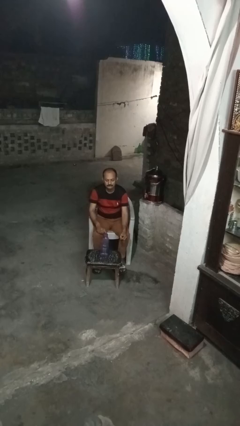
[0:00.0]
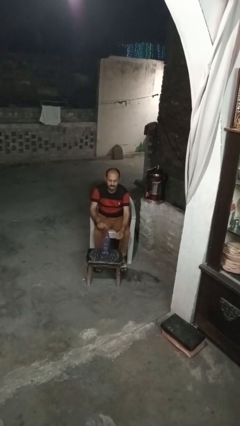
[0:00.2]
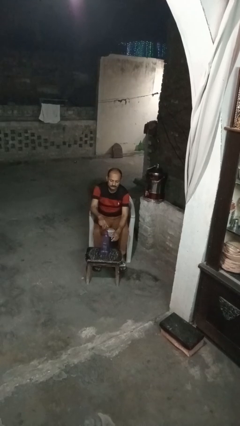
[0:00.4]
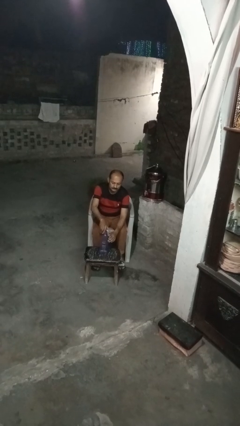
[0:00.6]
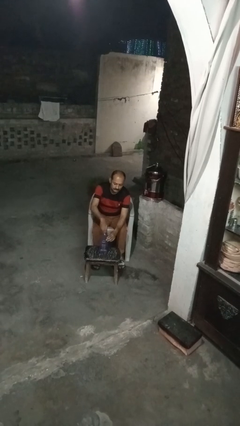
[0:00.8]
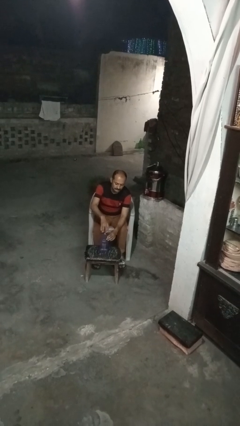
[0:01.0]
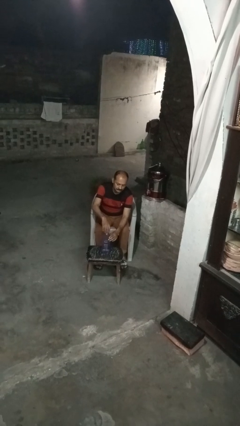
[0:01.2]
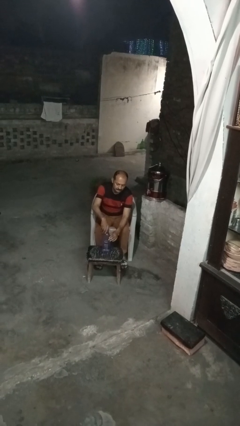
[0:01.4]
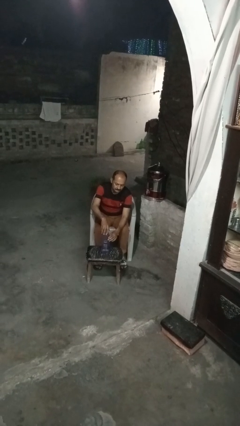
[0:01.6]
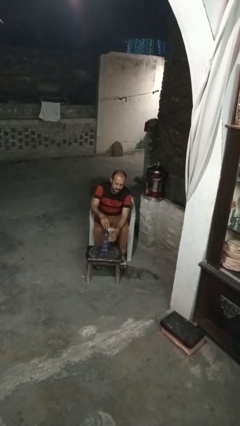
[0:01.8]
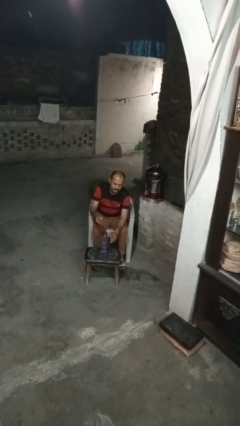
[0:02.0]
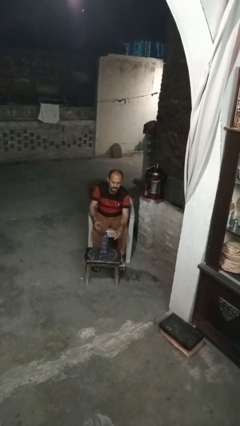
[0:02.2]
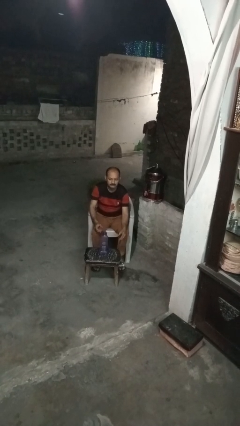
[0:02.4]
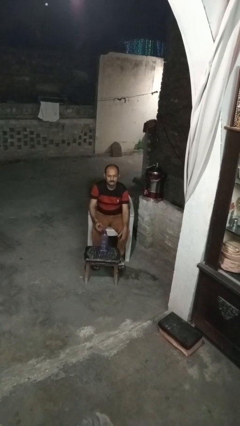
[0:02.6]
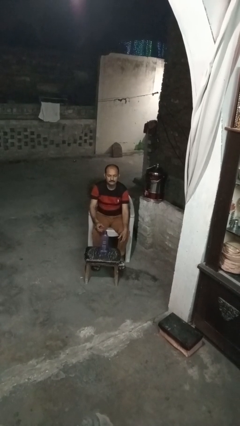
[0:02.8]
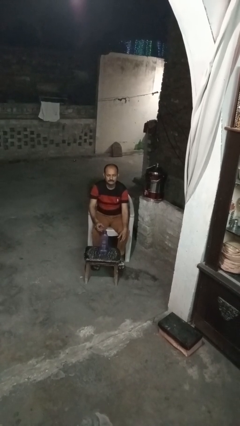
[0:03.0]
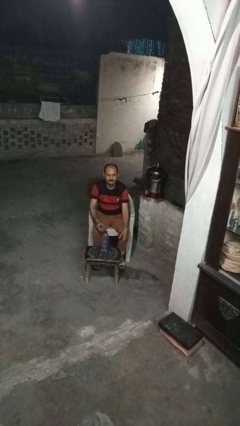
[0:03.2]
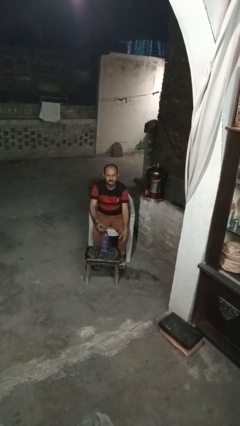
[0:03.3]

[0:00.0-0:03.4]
person unscrews lid from bottle

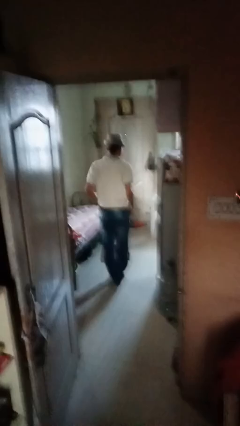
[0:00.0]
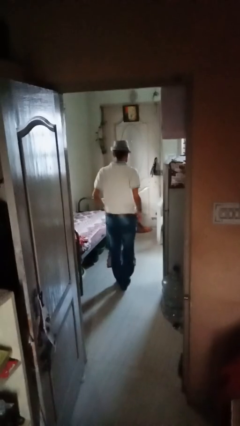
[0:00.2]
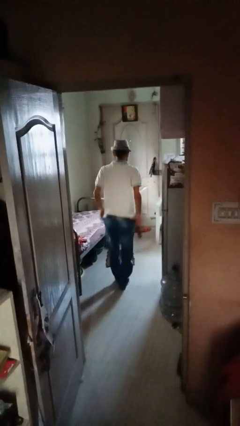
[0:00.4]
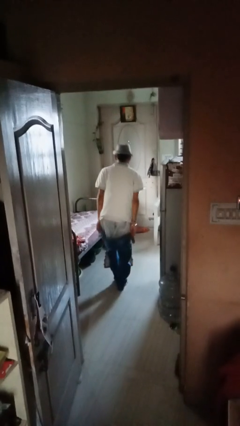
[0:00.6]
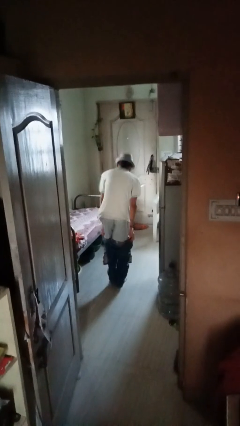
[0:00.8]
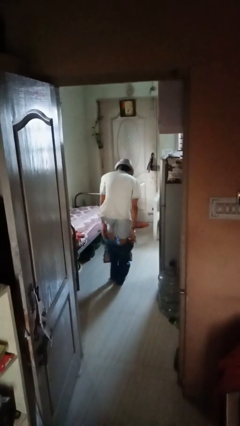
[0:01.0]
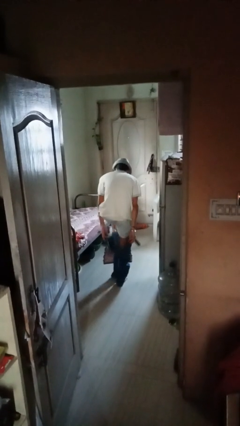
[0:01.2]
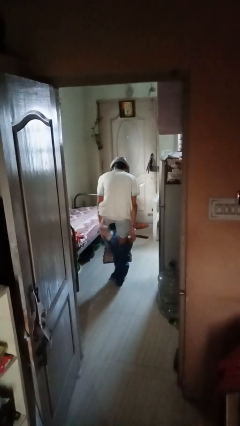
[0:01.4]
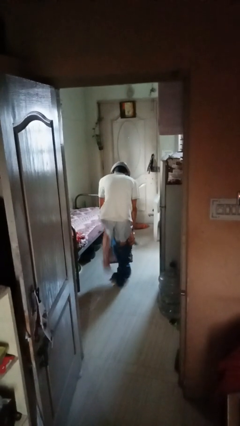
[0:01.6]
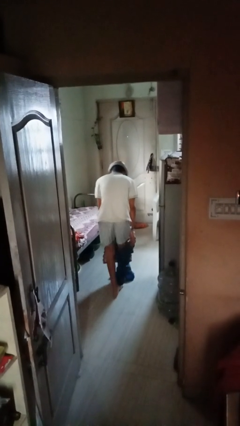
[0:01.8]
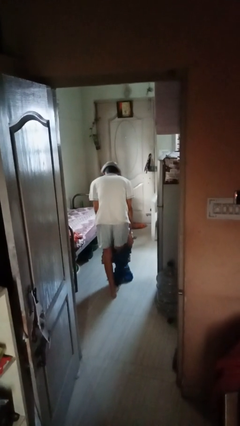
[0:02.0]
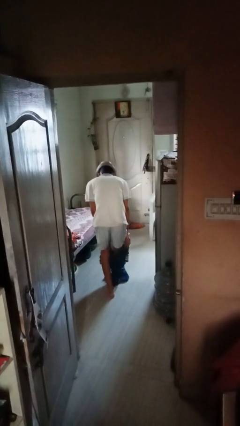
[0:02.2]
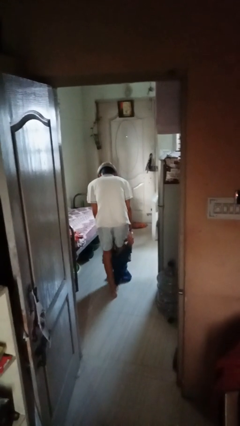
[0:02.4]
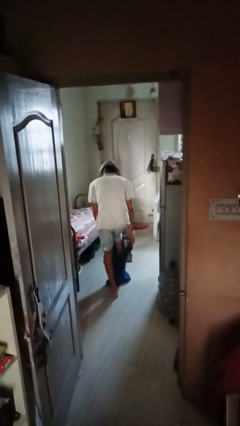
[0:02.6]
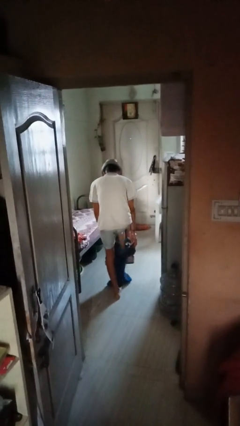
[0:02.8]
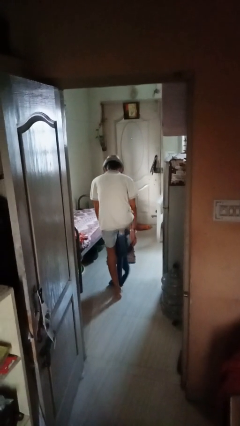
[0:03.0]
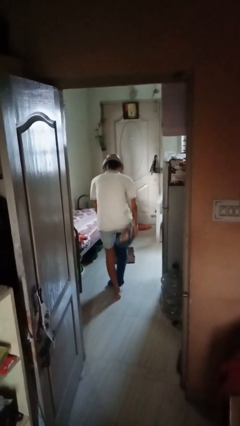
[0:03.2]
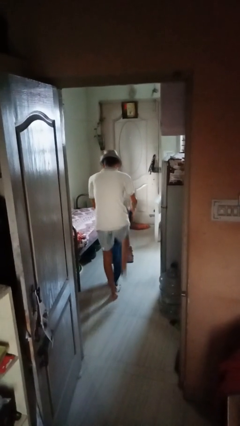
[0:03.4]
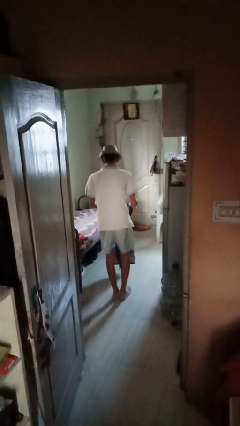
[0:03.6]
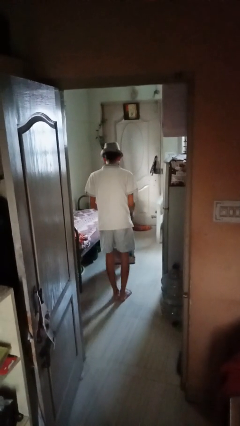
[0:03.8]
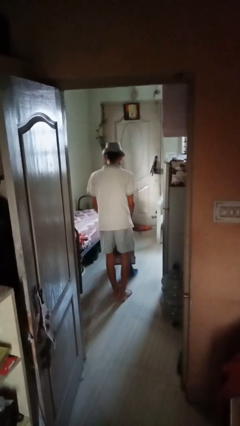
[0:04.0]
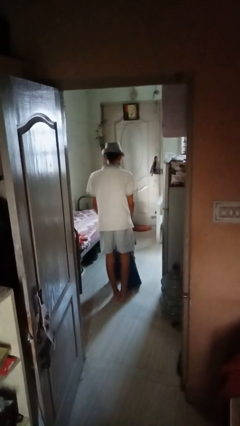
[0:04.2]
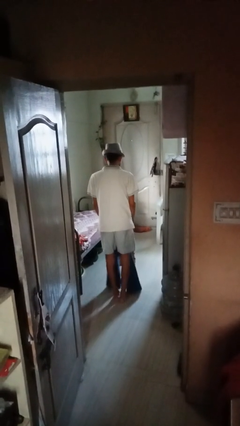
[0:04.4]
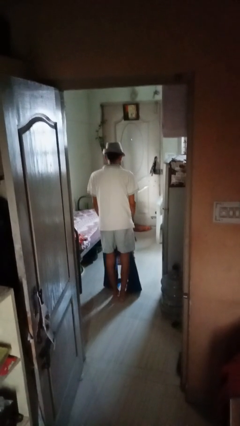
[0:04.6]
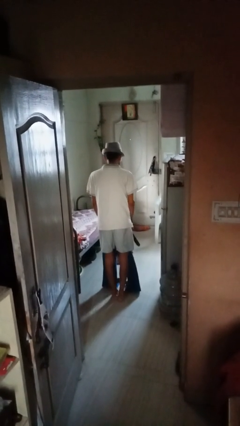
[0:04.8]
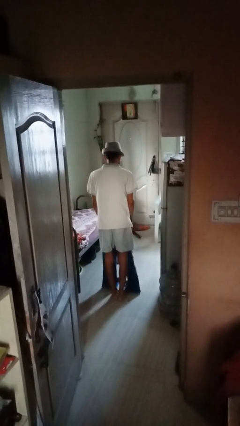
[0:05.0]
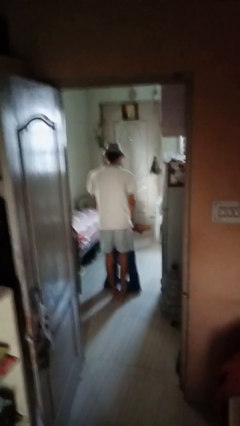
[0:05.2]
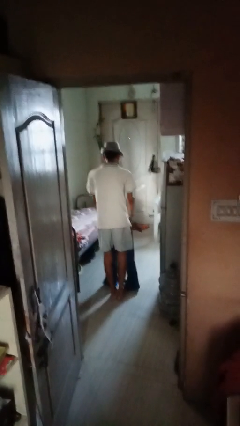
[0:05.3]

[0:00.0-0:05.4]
person takes off pants

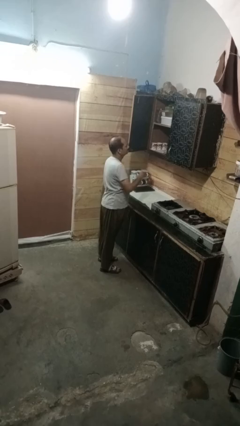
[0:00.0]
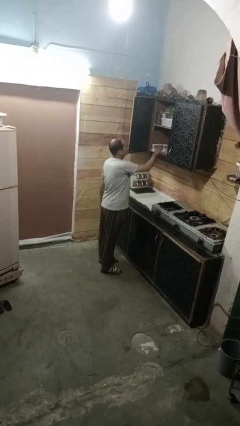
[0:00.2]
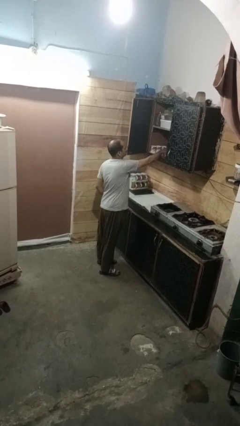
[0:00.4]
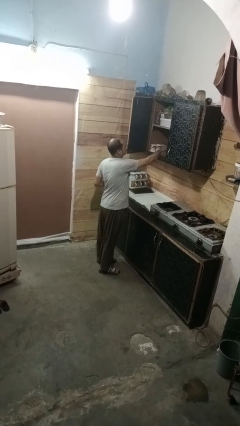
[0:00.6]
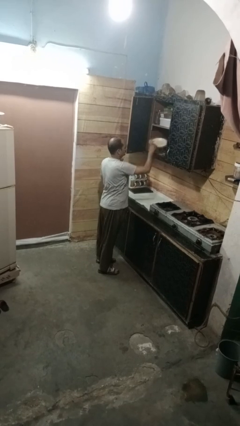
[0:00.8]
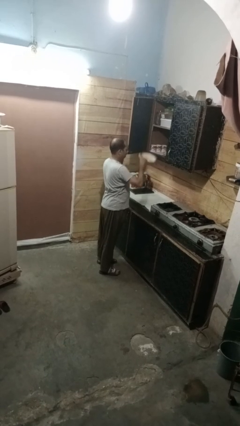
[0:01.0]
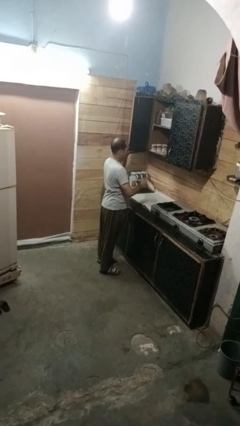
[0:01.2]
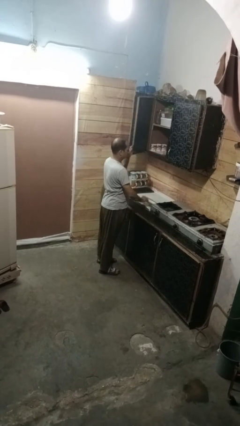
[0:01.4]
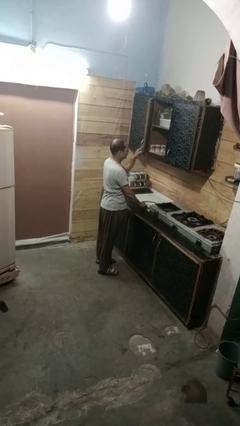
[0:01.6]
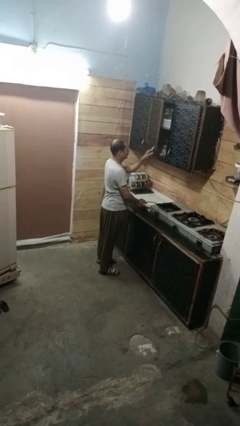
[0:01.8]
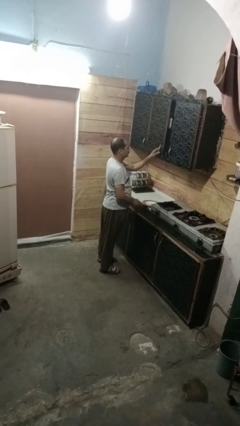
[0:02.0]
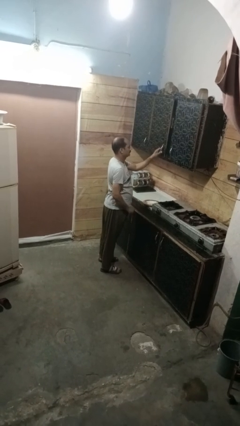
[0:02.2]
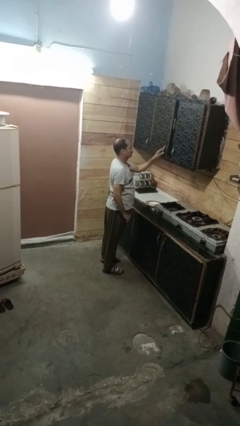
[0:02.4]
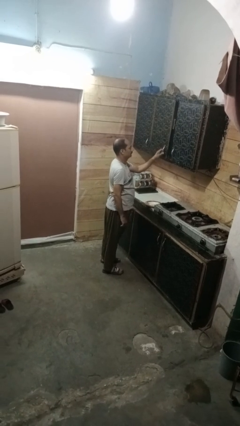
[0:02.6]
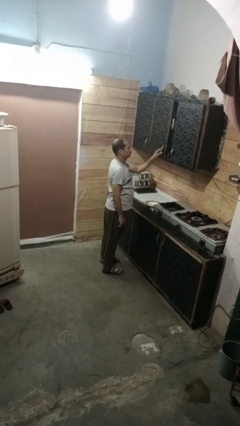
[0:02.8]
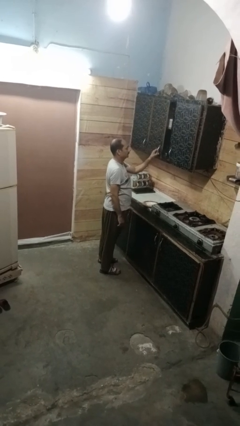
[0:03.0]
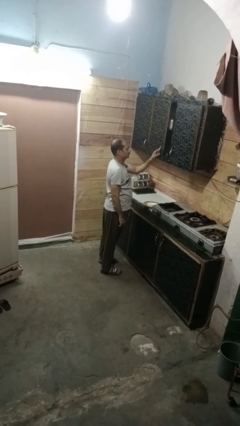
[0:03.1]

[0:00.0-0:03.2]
person takes object from cabinet

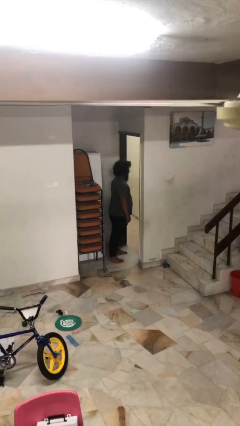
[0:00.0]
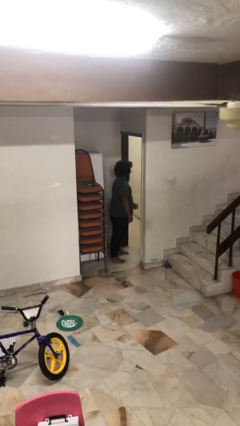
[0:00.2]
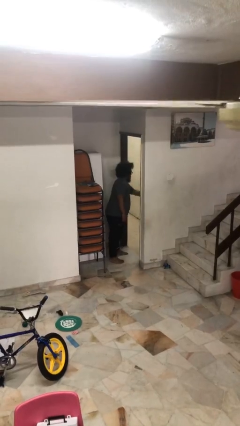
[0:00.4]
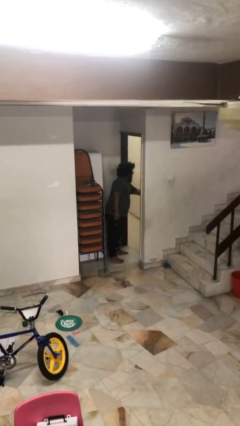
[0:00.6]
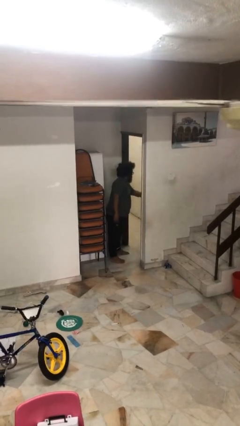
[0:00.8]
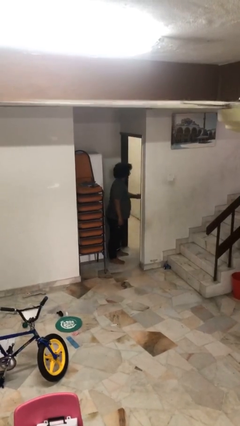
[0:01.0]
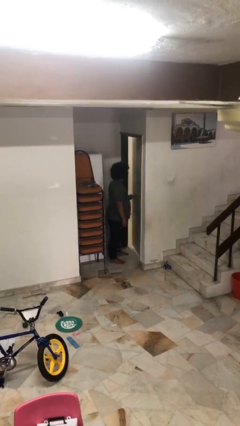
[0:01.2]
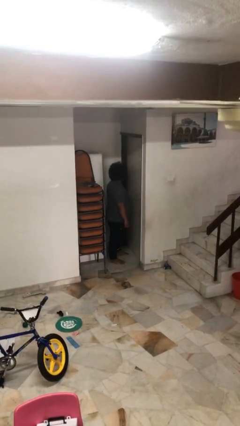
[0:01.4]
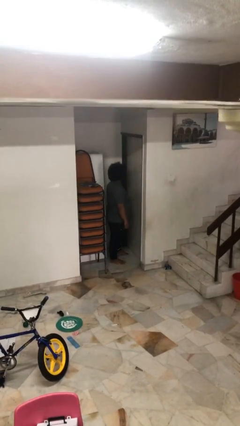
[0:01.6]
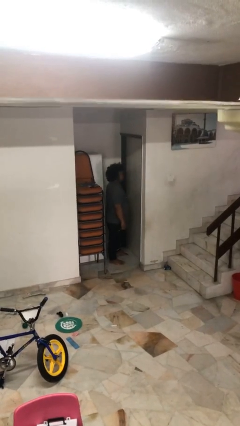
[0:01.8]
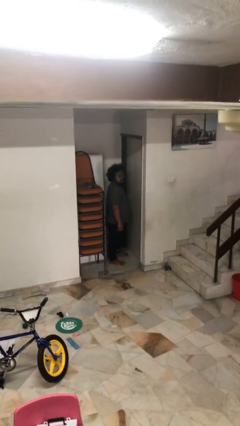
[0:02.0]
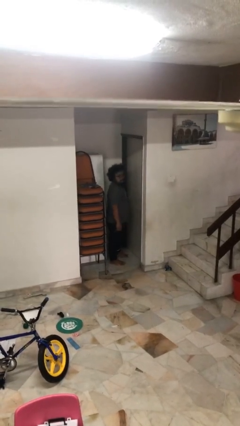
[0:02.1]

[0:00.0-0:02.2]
person closes facility door

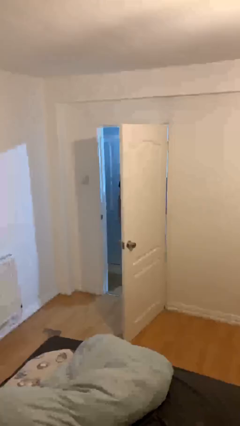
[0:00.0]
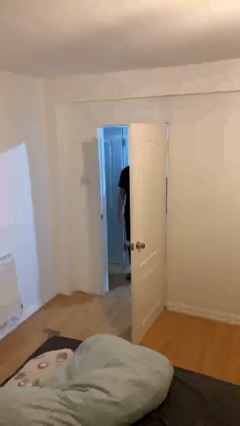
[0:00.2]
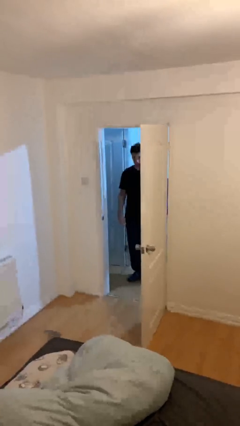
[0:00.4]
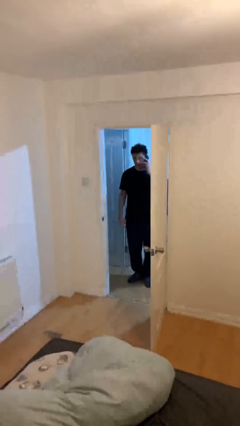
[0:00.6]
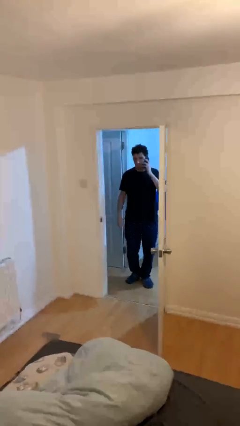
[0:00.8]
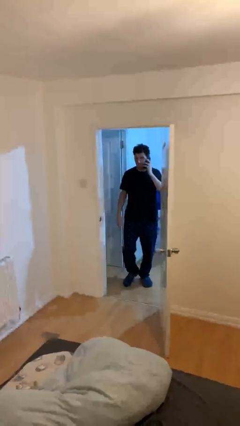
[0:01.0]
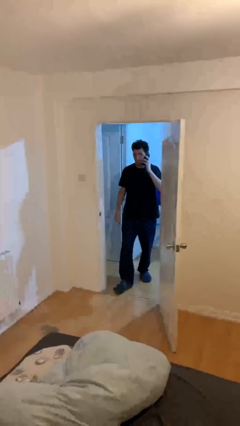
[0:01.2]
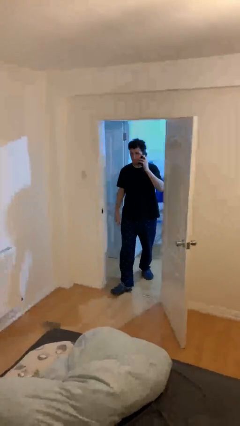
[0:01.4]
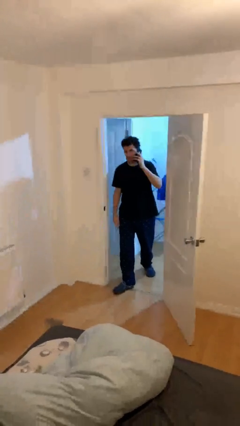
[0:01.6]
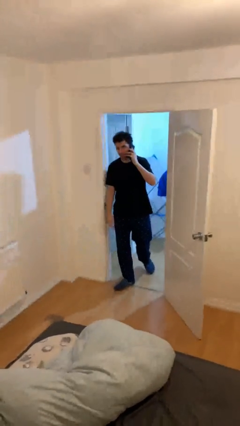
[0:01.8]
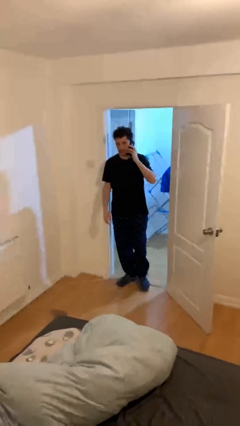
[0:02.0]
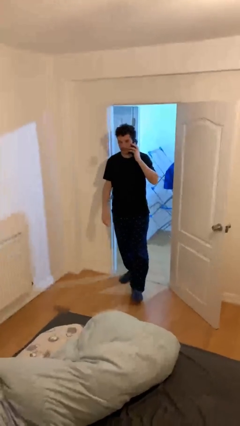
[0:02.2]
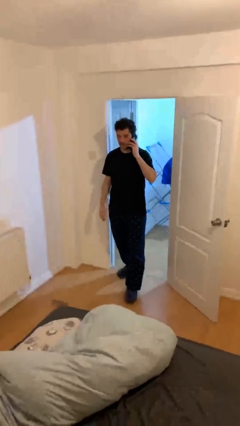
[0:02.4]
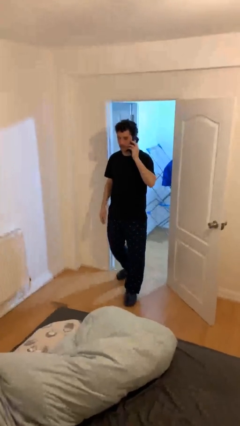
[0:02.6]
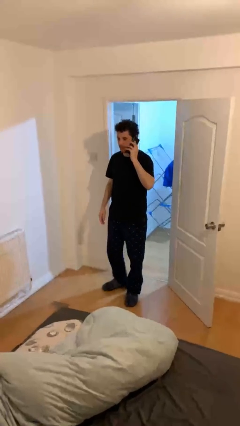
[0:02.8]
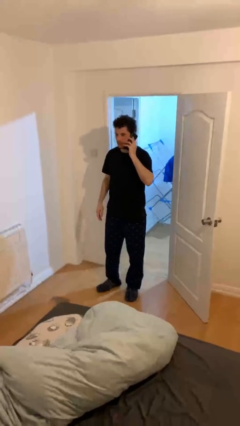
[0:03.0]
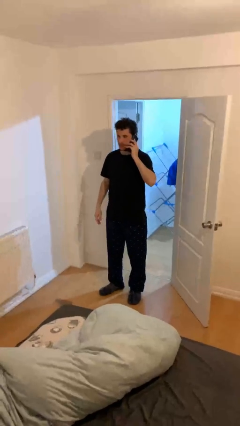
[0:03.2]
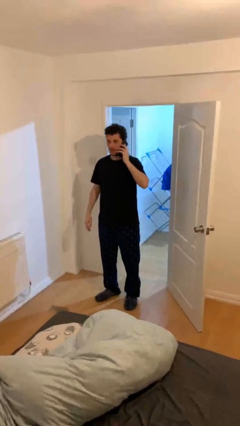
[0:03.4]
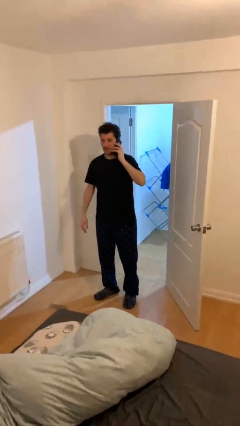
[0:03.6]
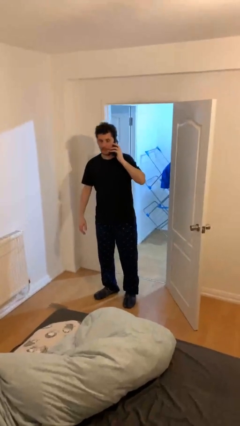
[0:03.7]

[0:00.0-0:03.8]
person enters scene through structure
